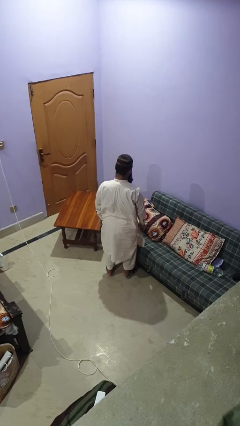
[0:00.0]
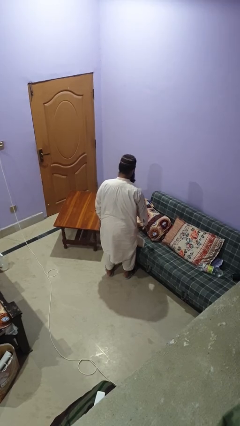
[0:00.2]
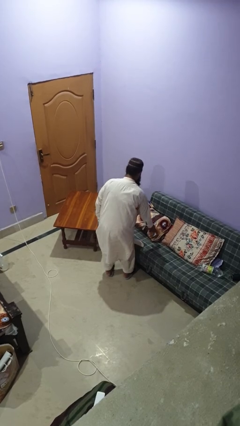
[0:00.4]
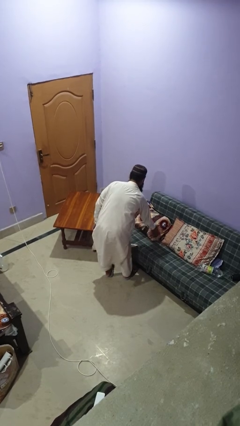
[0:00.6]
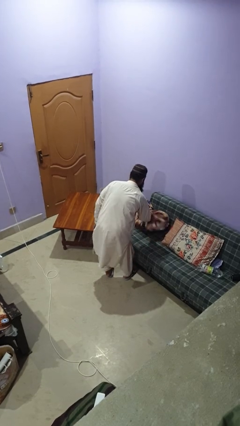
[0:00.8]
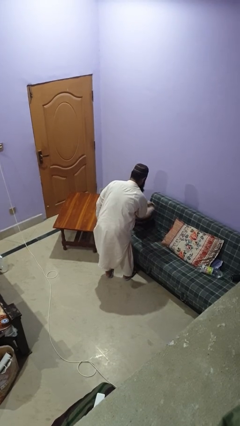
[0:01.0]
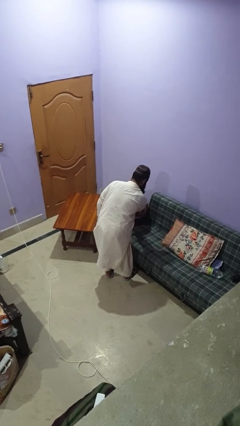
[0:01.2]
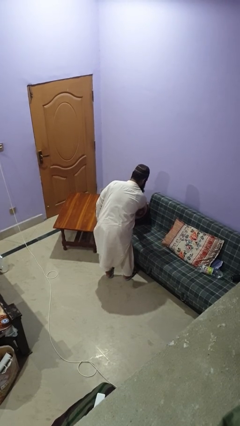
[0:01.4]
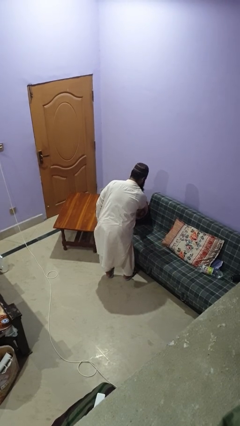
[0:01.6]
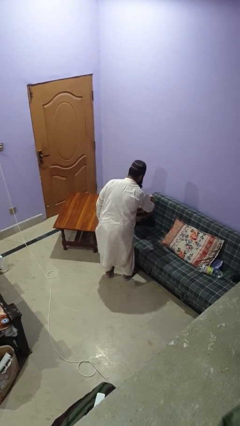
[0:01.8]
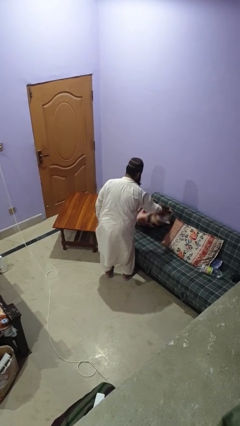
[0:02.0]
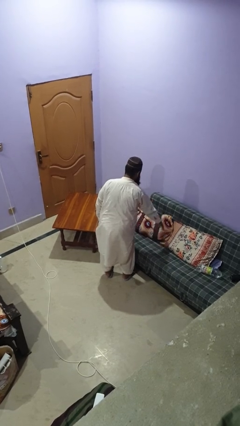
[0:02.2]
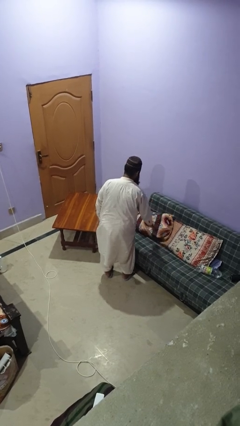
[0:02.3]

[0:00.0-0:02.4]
person searches in couch

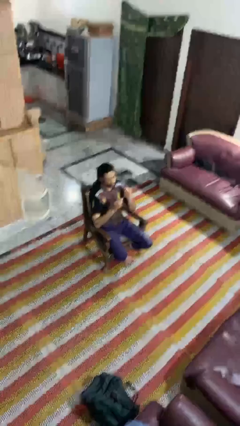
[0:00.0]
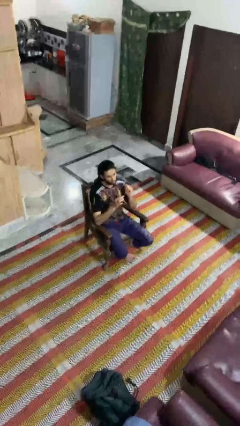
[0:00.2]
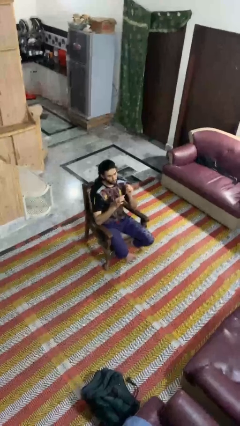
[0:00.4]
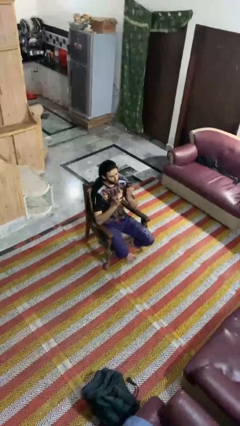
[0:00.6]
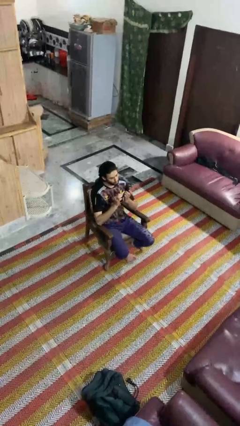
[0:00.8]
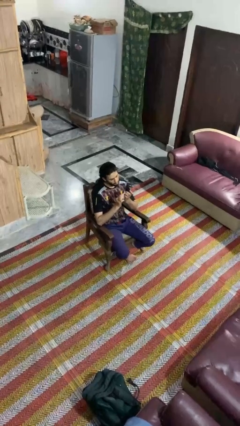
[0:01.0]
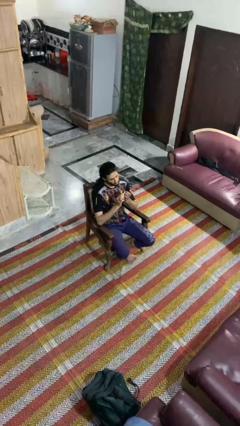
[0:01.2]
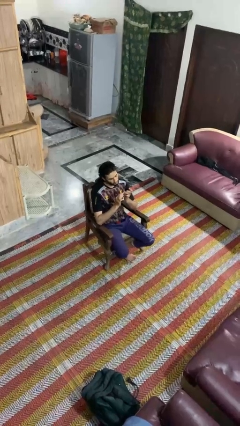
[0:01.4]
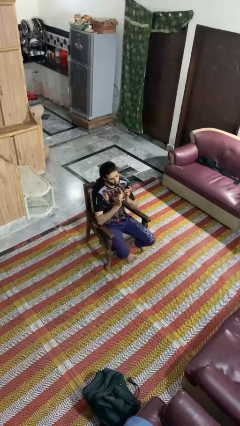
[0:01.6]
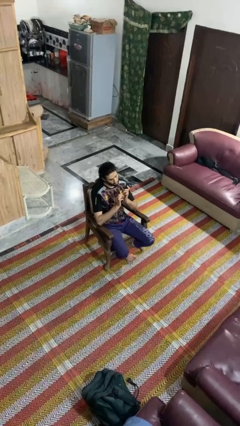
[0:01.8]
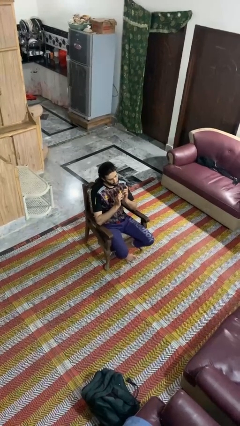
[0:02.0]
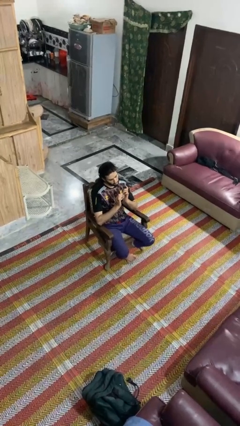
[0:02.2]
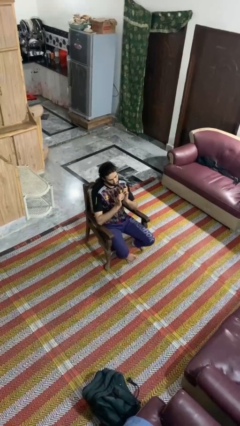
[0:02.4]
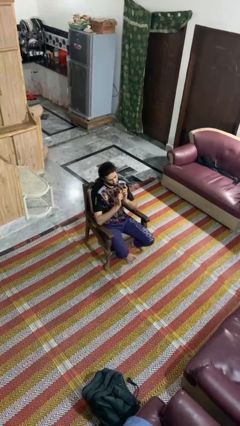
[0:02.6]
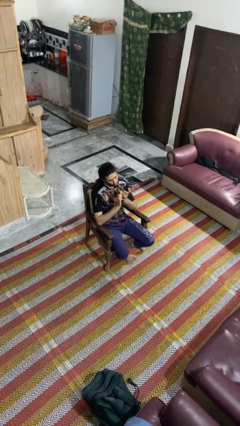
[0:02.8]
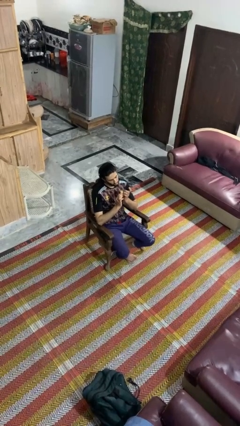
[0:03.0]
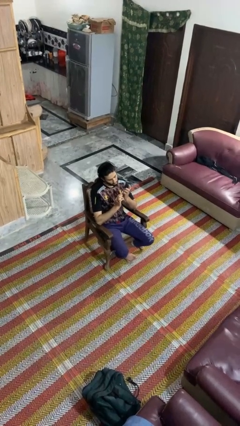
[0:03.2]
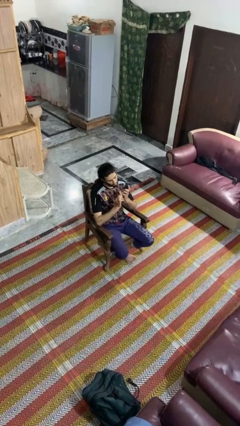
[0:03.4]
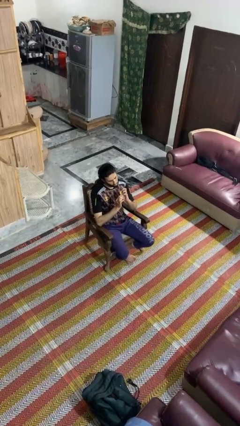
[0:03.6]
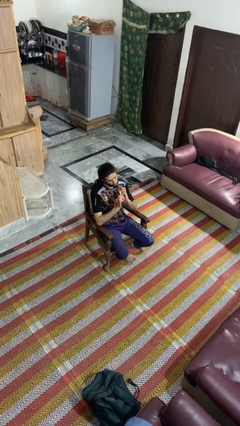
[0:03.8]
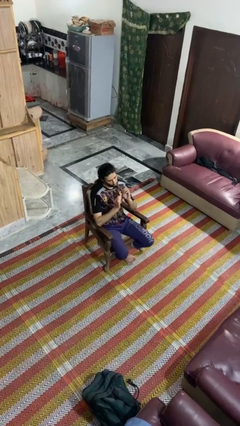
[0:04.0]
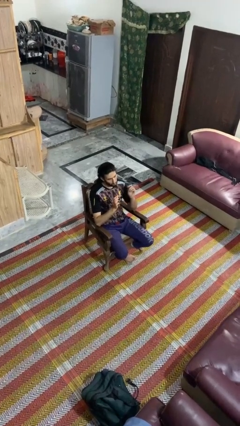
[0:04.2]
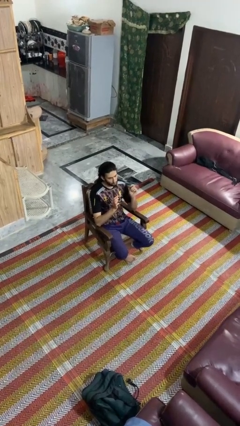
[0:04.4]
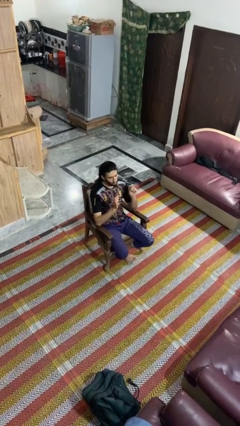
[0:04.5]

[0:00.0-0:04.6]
person files fingernails

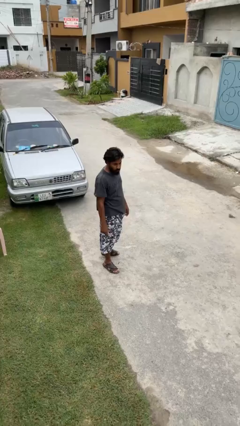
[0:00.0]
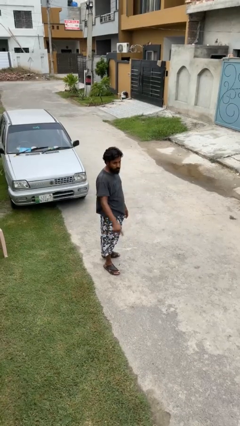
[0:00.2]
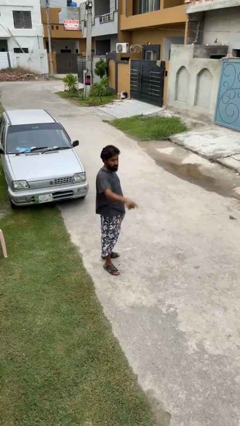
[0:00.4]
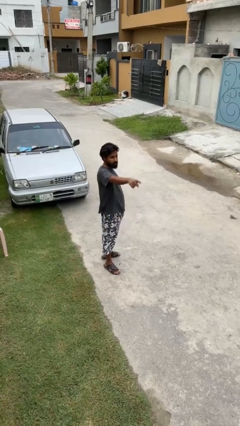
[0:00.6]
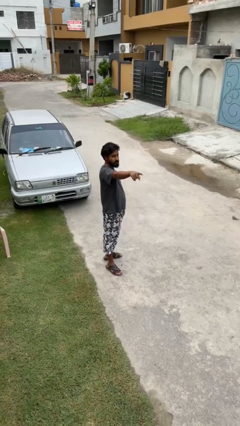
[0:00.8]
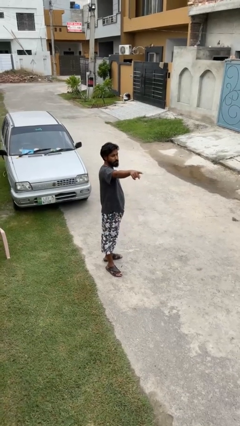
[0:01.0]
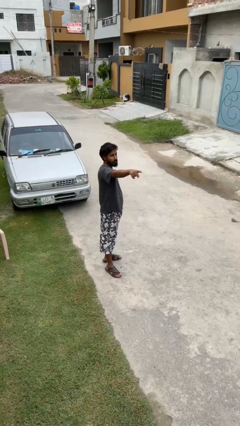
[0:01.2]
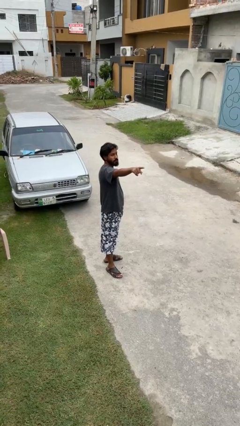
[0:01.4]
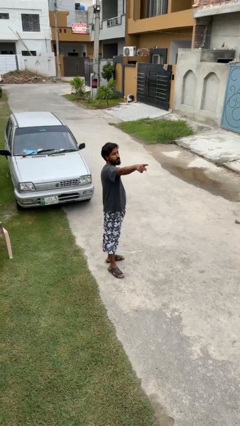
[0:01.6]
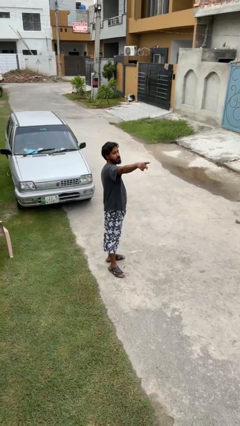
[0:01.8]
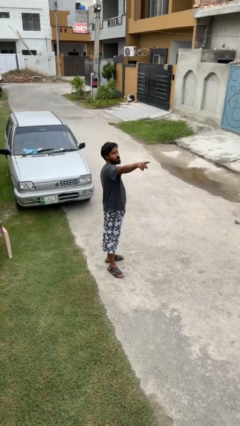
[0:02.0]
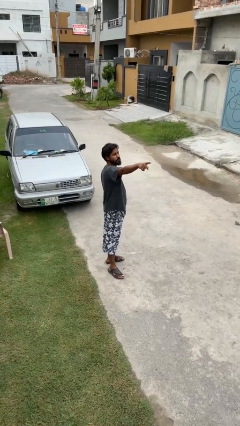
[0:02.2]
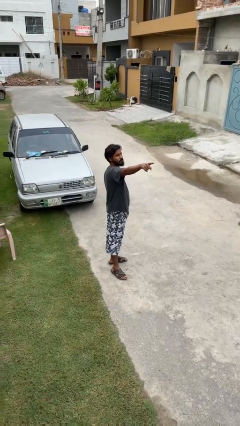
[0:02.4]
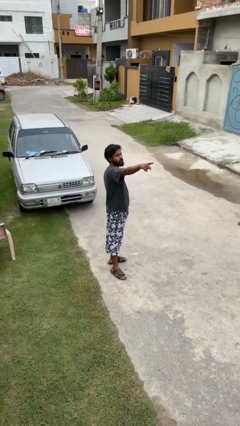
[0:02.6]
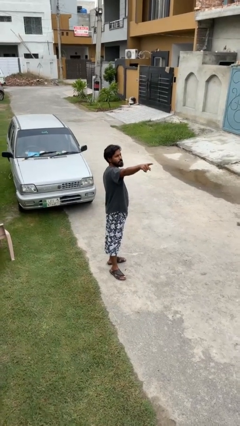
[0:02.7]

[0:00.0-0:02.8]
person points at person

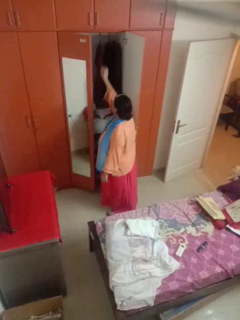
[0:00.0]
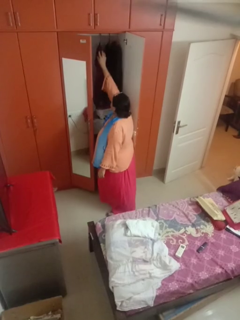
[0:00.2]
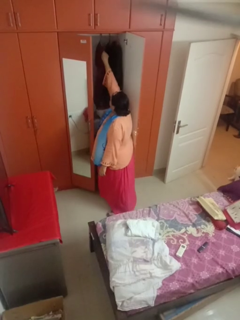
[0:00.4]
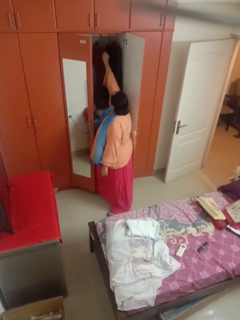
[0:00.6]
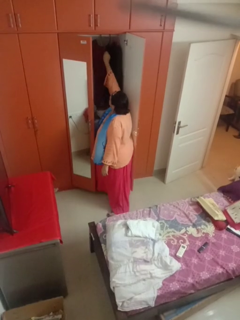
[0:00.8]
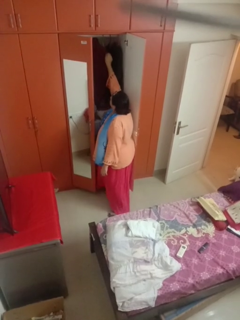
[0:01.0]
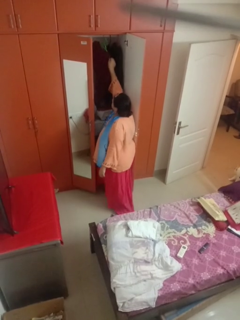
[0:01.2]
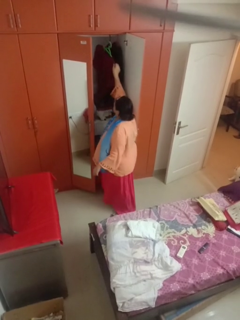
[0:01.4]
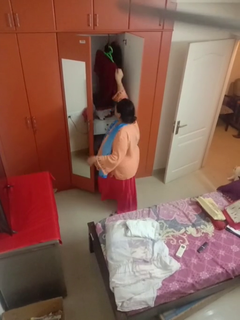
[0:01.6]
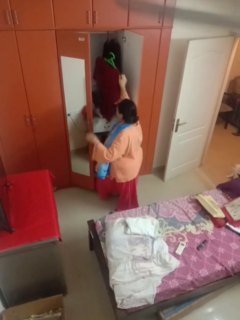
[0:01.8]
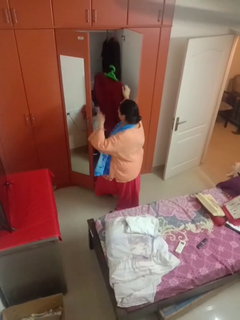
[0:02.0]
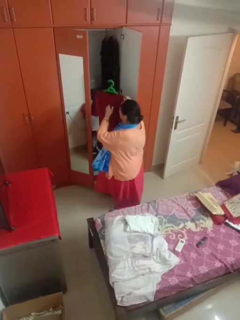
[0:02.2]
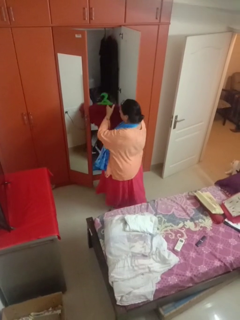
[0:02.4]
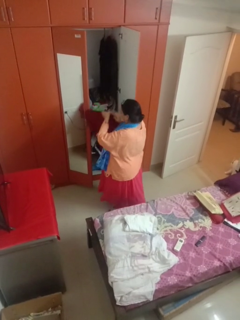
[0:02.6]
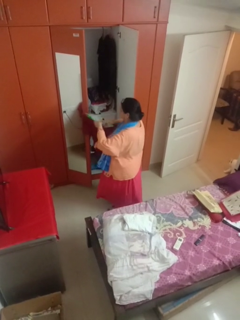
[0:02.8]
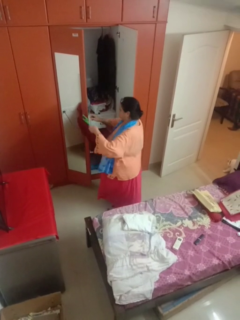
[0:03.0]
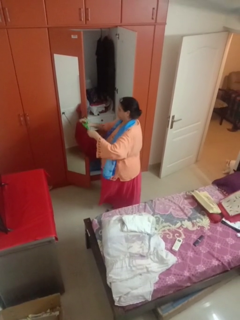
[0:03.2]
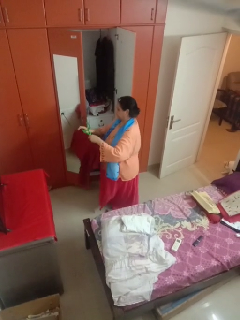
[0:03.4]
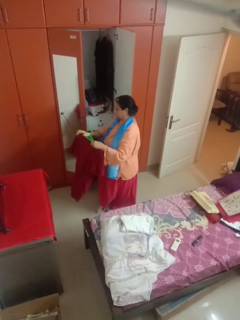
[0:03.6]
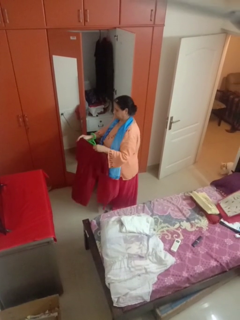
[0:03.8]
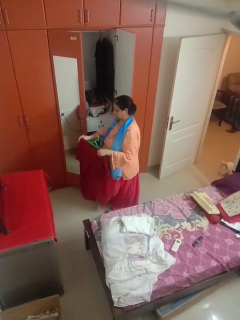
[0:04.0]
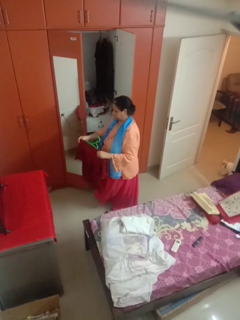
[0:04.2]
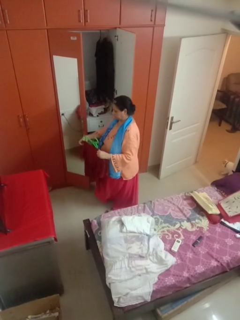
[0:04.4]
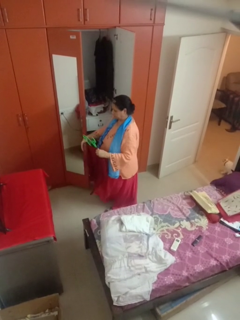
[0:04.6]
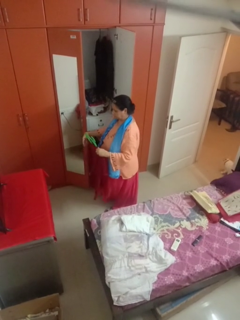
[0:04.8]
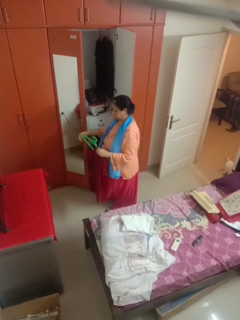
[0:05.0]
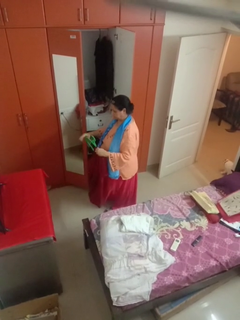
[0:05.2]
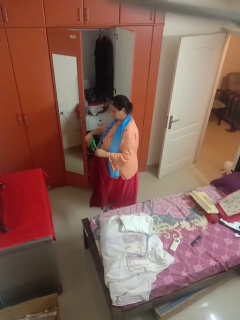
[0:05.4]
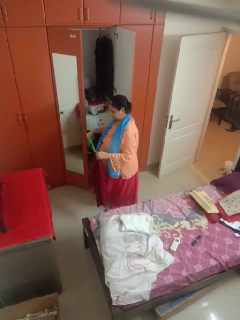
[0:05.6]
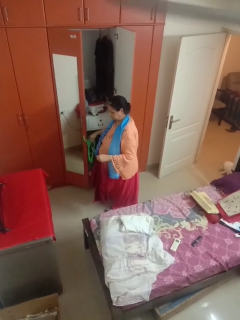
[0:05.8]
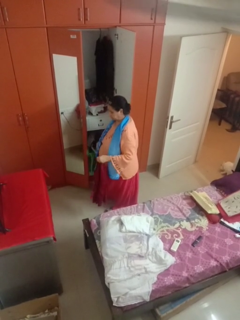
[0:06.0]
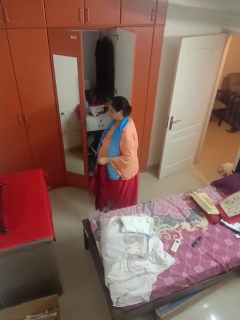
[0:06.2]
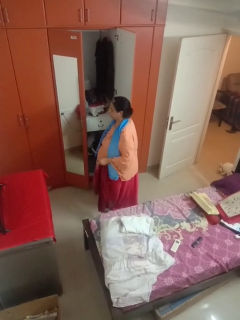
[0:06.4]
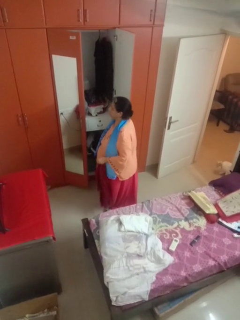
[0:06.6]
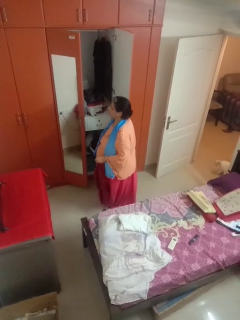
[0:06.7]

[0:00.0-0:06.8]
person takes clothes from closet

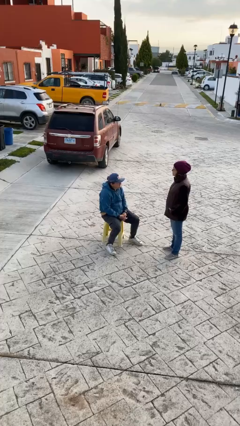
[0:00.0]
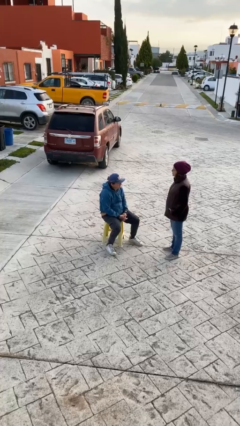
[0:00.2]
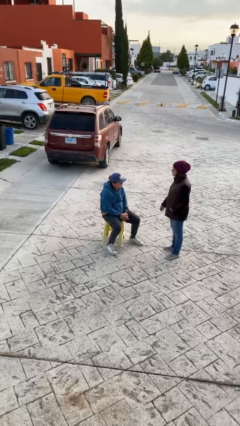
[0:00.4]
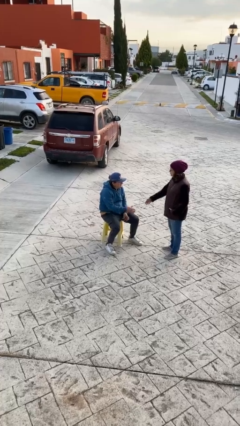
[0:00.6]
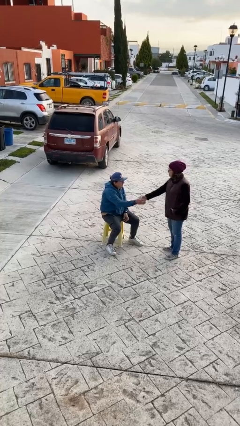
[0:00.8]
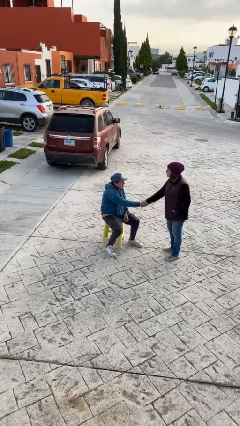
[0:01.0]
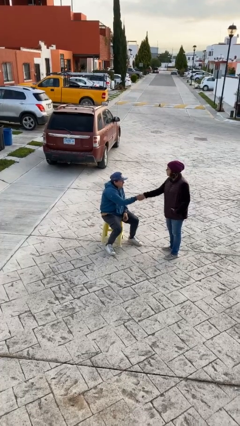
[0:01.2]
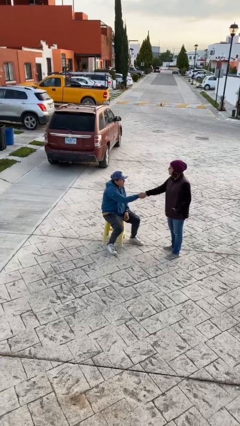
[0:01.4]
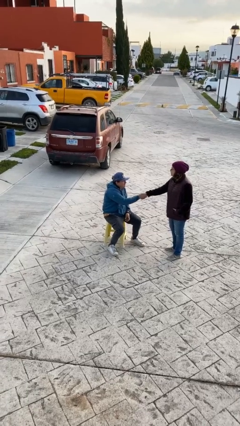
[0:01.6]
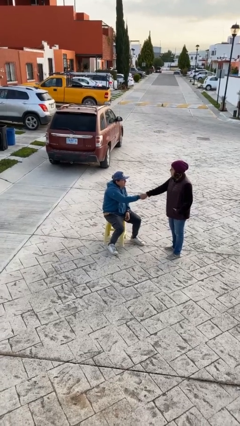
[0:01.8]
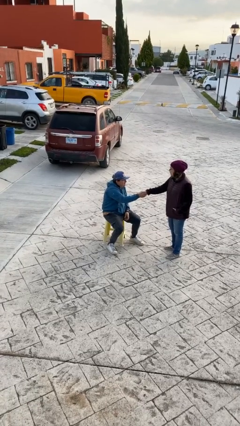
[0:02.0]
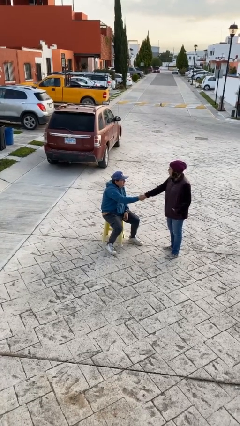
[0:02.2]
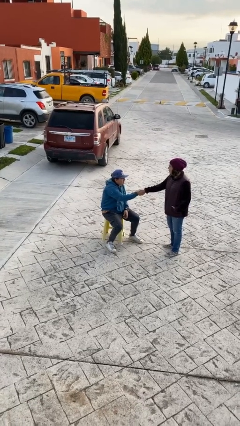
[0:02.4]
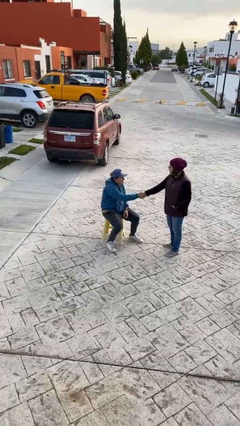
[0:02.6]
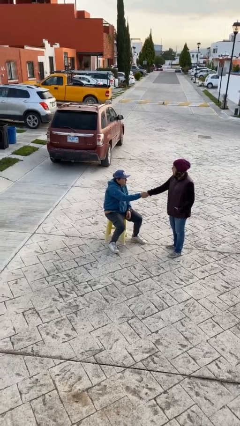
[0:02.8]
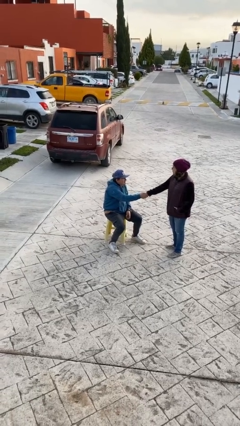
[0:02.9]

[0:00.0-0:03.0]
person shakes hand
